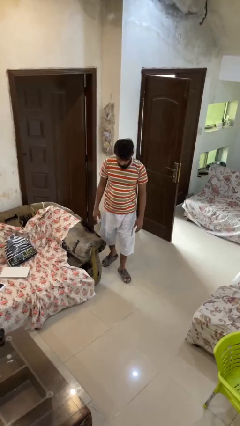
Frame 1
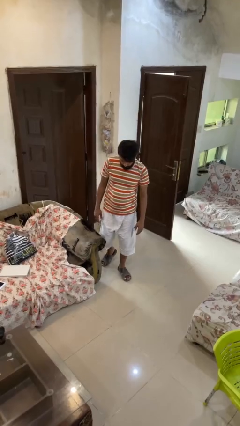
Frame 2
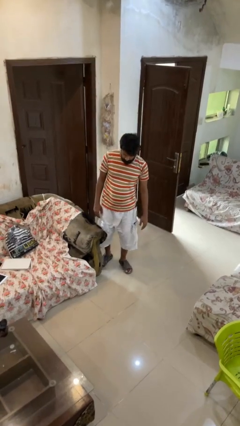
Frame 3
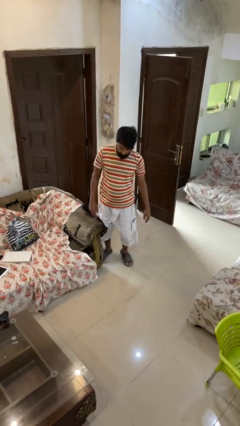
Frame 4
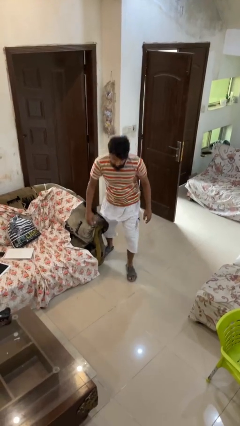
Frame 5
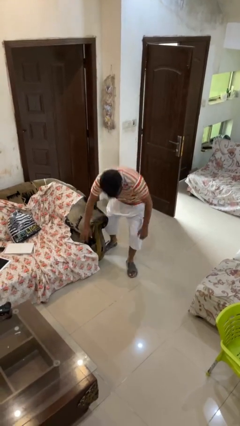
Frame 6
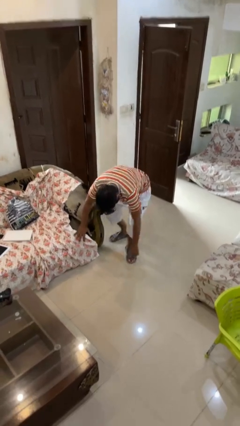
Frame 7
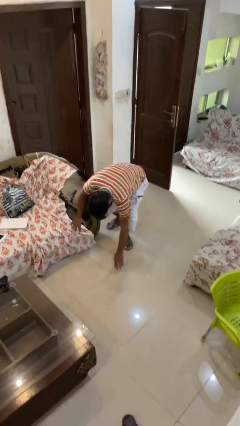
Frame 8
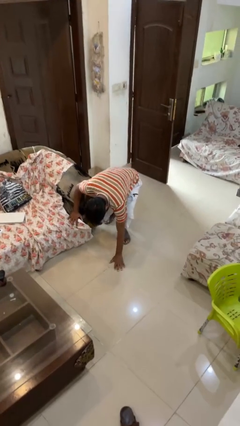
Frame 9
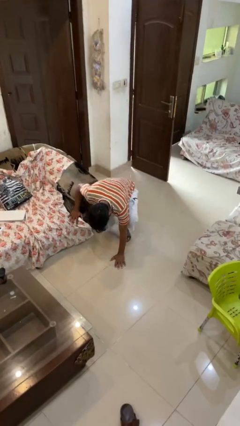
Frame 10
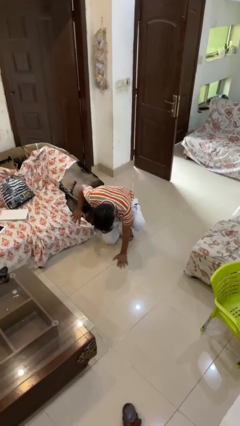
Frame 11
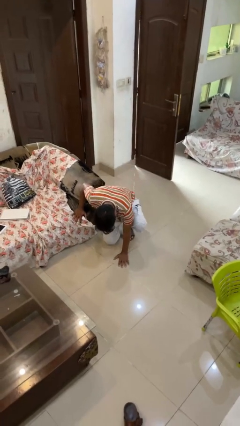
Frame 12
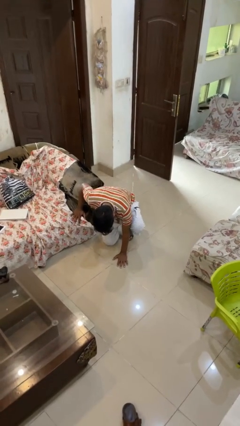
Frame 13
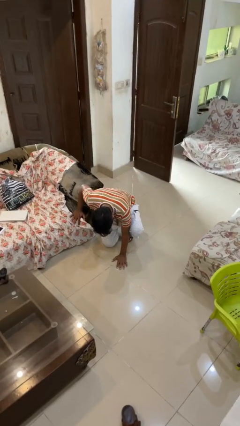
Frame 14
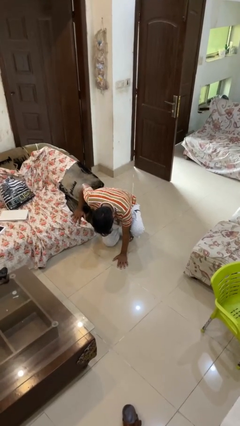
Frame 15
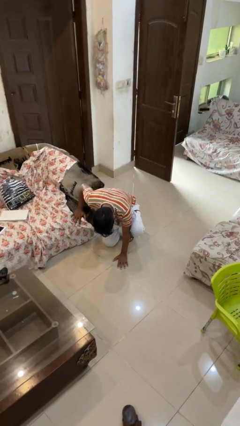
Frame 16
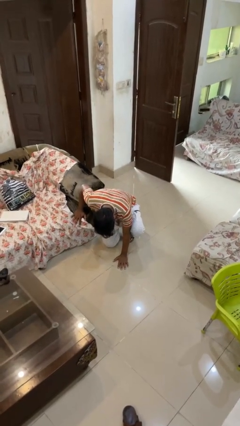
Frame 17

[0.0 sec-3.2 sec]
person trips on object on floor

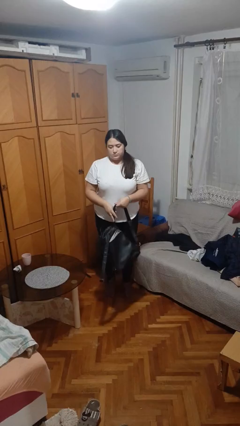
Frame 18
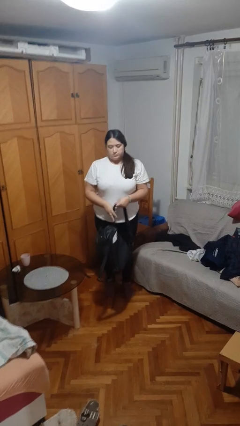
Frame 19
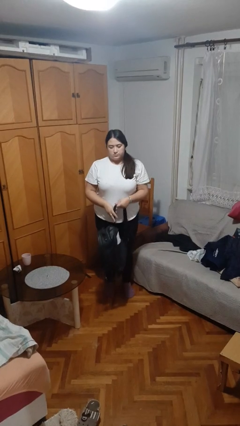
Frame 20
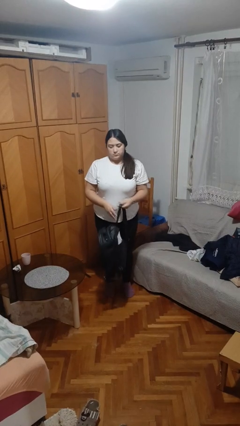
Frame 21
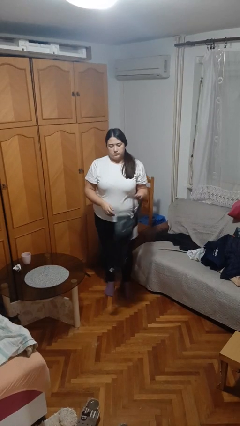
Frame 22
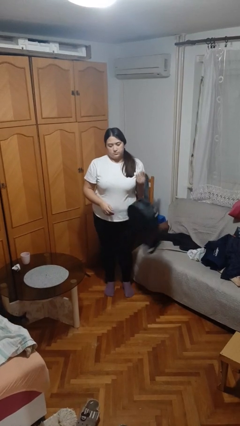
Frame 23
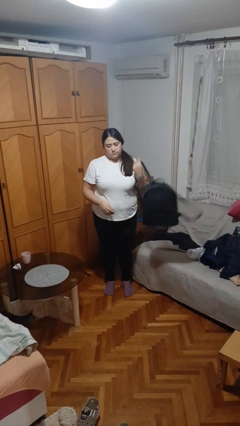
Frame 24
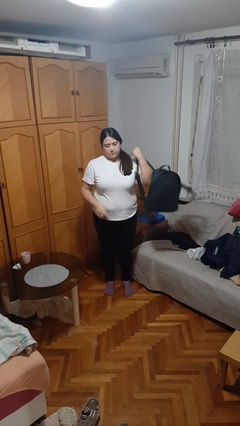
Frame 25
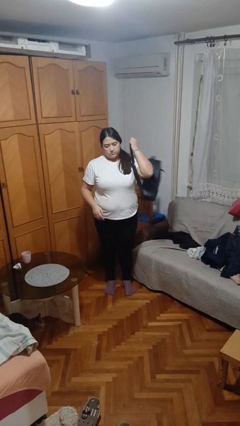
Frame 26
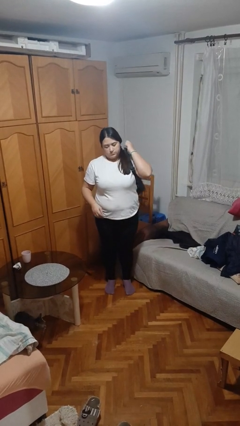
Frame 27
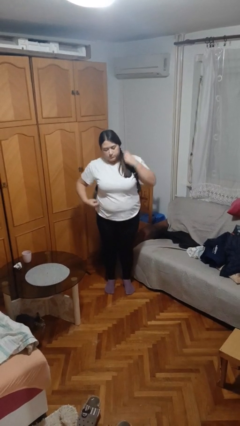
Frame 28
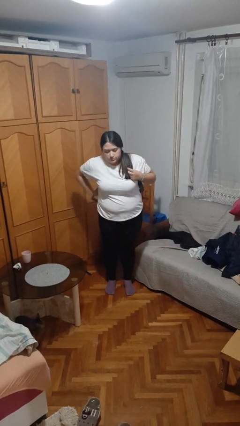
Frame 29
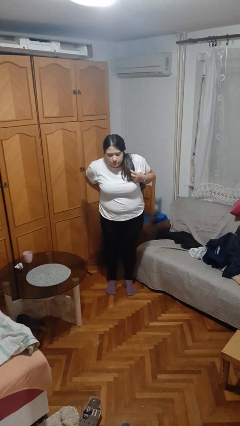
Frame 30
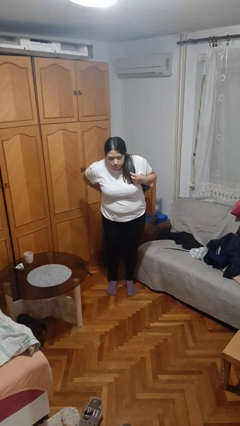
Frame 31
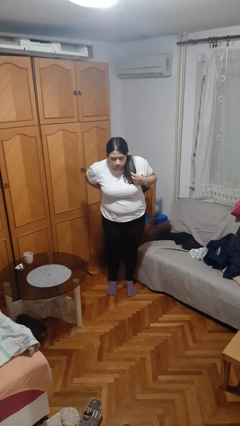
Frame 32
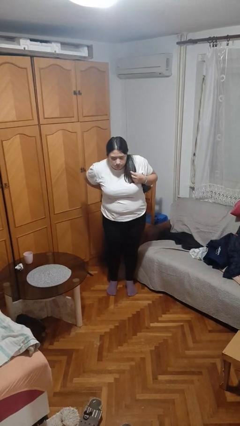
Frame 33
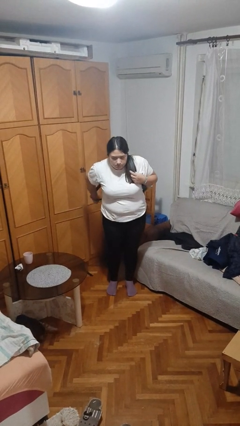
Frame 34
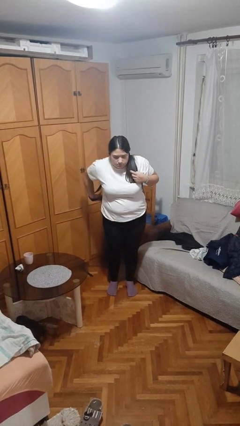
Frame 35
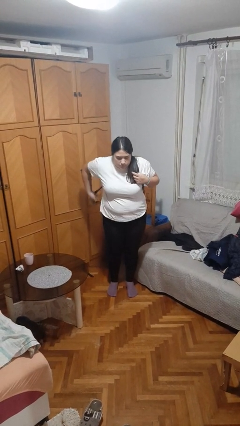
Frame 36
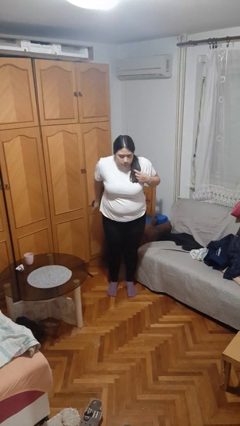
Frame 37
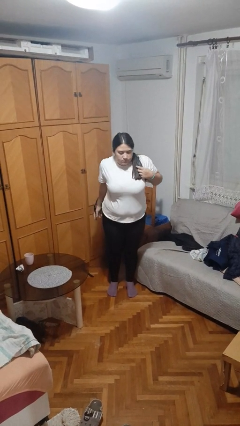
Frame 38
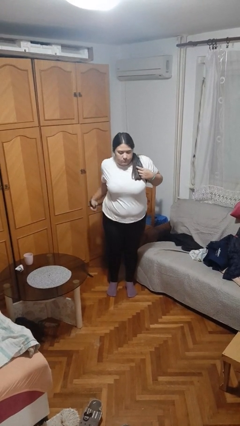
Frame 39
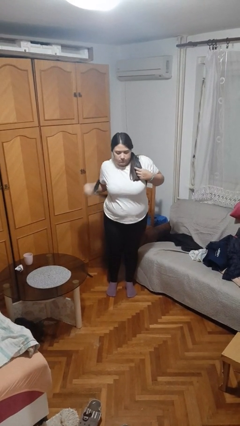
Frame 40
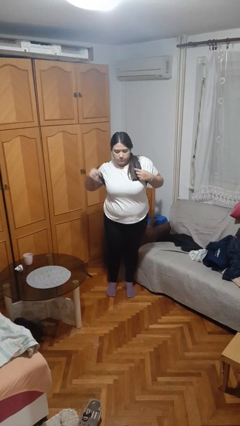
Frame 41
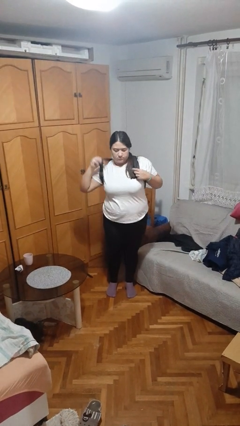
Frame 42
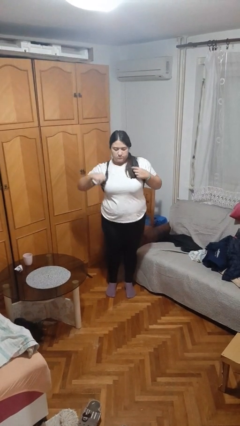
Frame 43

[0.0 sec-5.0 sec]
person puts on backpack

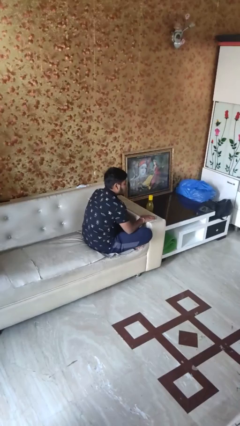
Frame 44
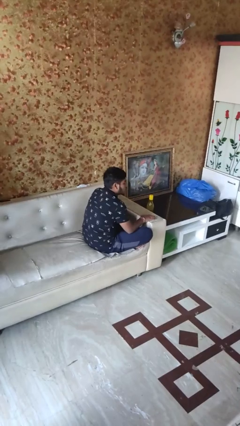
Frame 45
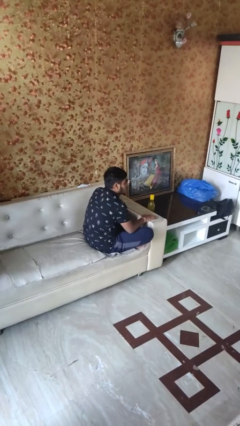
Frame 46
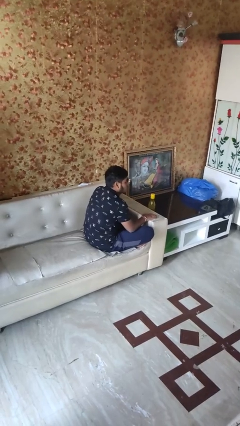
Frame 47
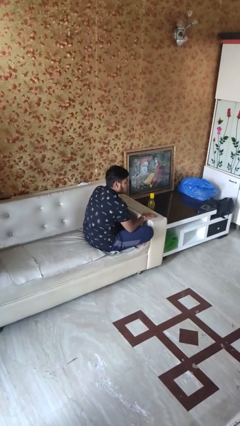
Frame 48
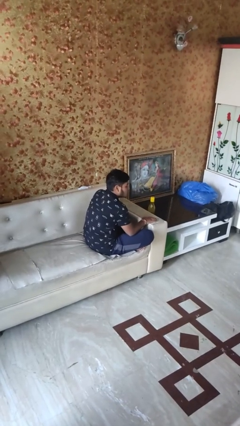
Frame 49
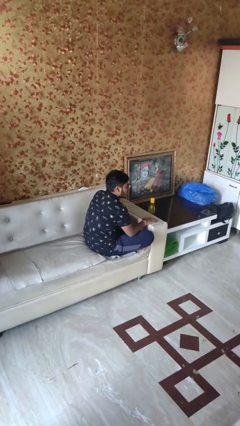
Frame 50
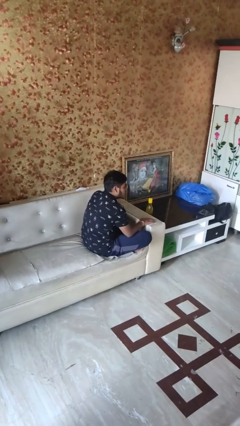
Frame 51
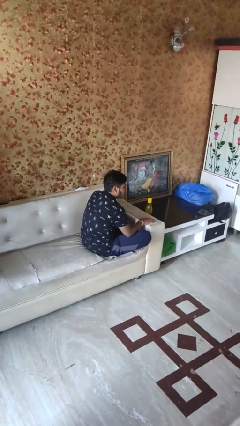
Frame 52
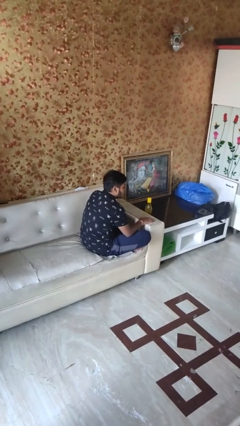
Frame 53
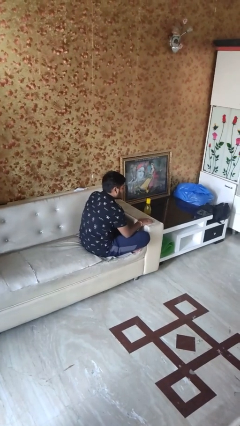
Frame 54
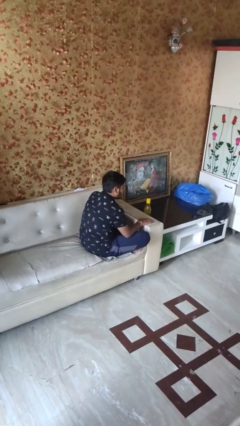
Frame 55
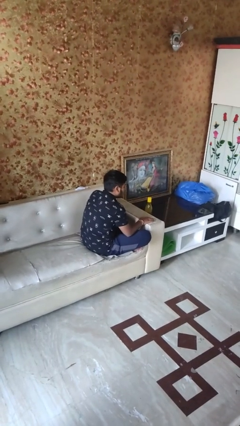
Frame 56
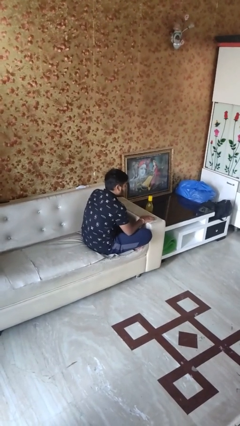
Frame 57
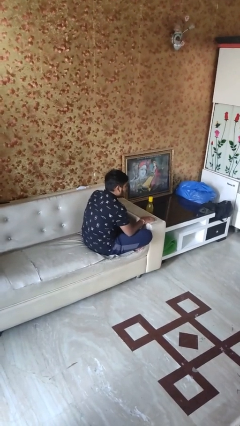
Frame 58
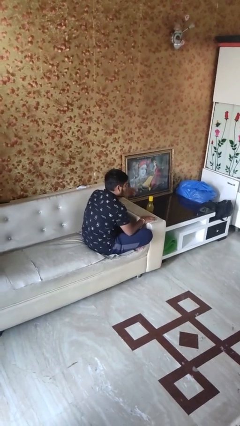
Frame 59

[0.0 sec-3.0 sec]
person rubs eyes

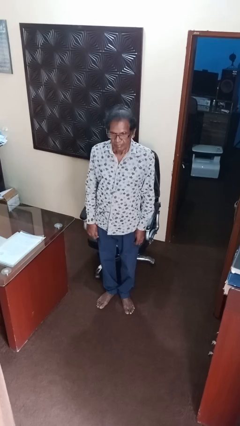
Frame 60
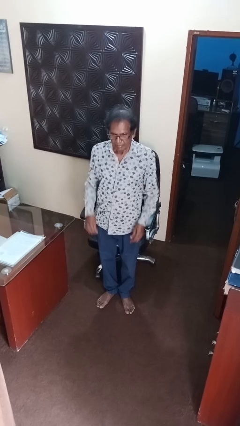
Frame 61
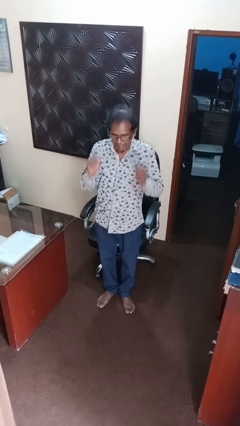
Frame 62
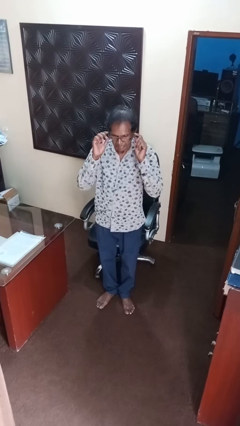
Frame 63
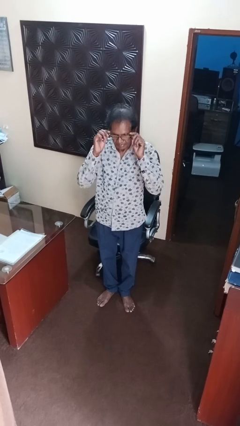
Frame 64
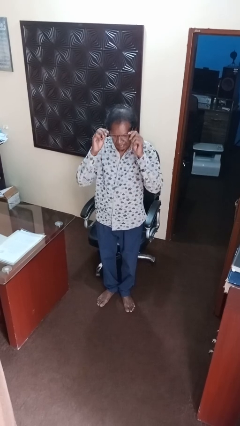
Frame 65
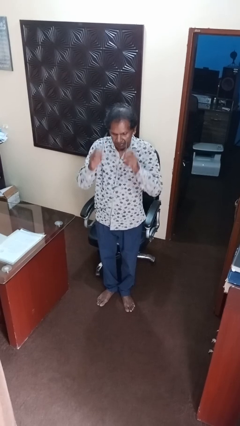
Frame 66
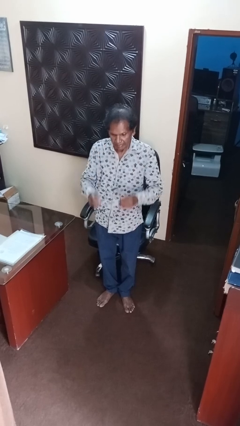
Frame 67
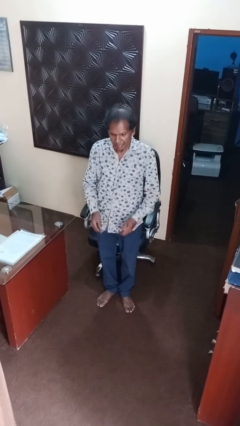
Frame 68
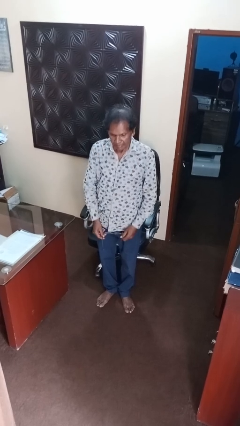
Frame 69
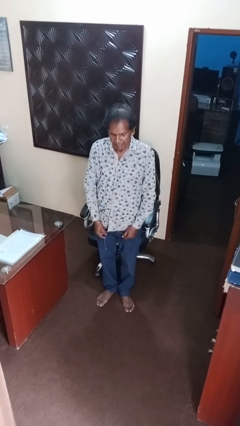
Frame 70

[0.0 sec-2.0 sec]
person takes off glasses

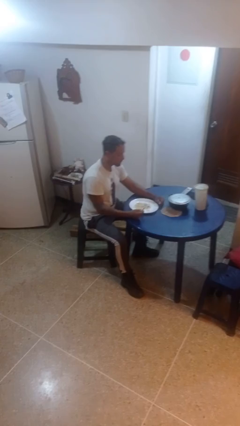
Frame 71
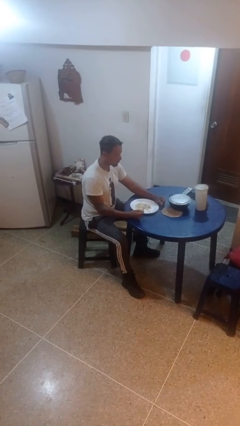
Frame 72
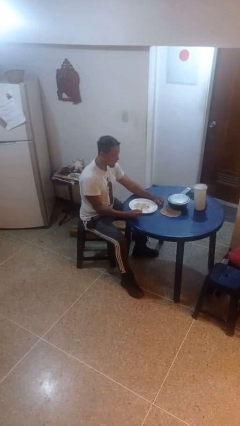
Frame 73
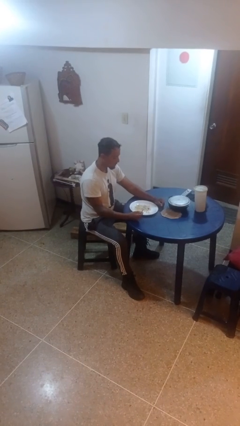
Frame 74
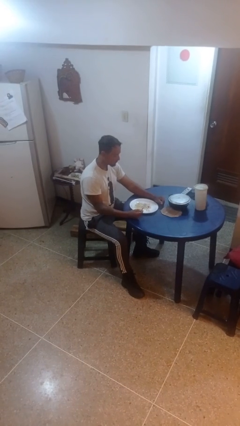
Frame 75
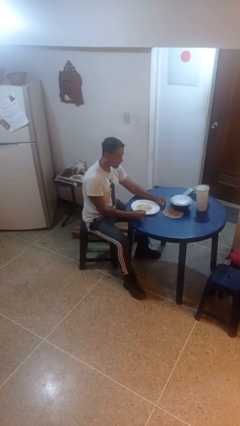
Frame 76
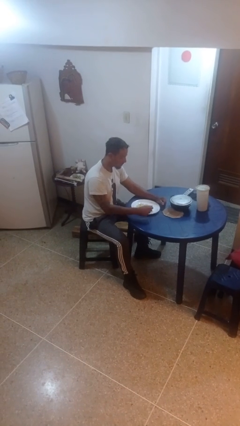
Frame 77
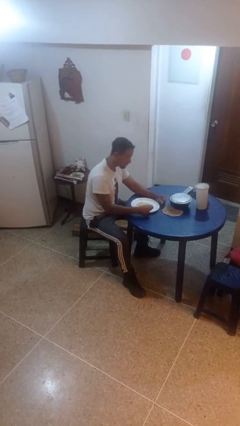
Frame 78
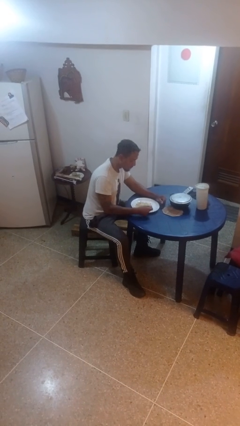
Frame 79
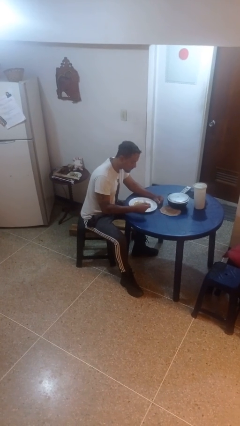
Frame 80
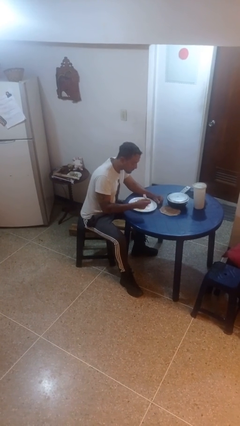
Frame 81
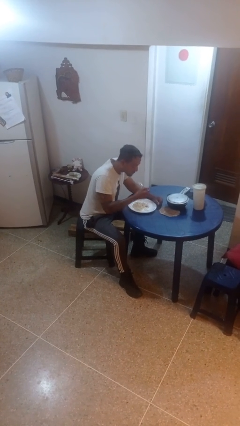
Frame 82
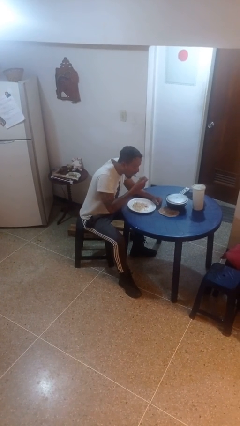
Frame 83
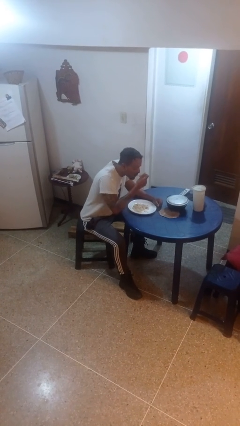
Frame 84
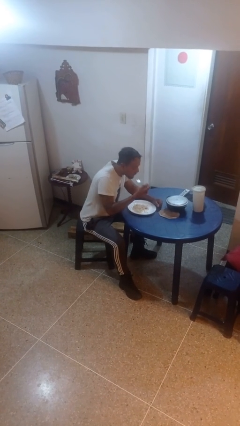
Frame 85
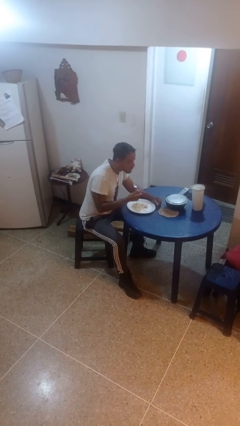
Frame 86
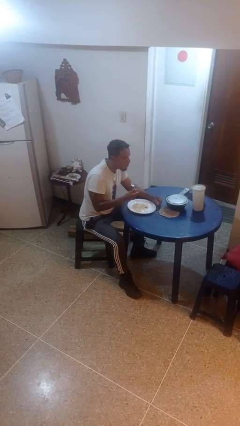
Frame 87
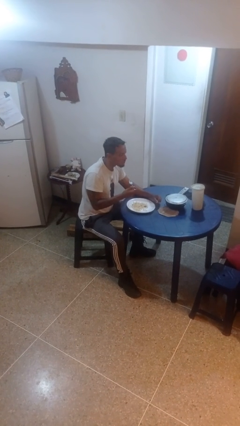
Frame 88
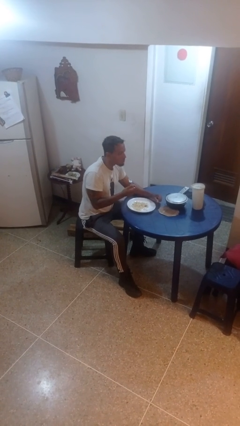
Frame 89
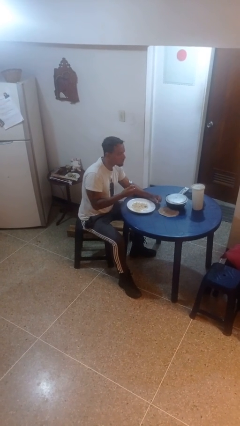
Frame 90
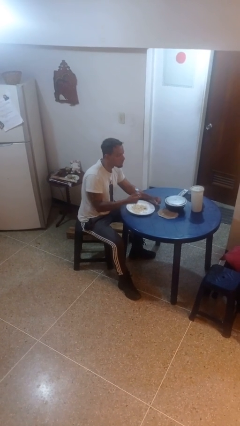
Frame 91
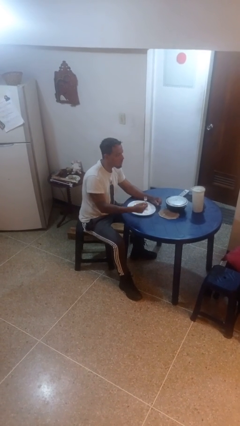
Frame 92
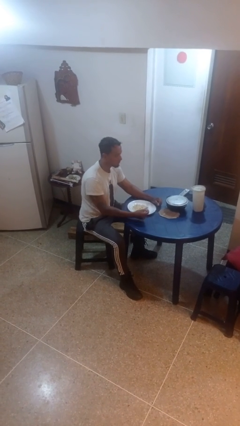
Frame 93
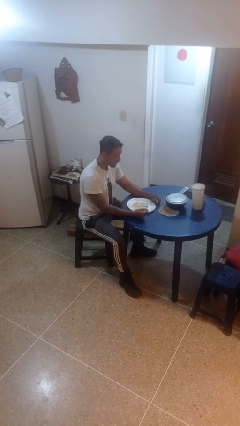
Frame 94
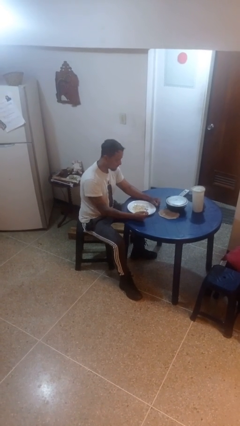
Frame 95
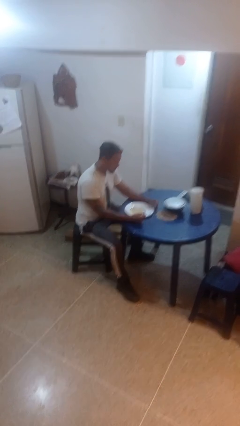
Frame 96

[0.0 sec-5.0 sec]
person eats with utensil
